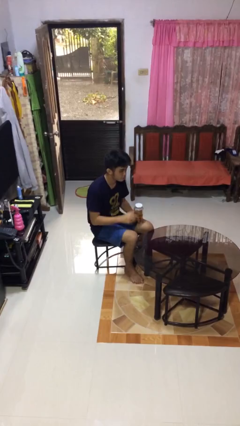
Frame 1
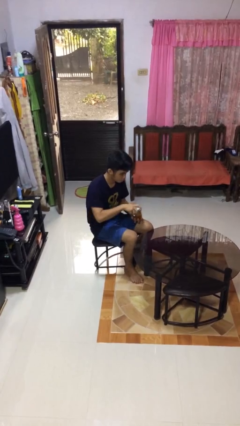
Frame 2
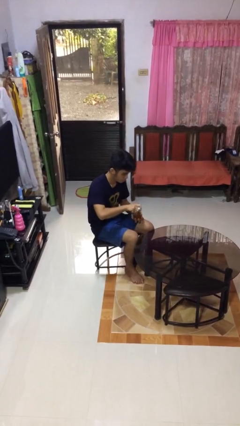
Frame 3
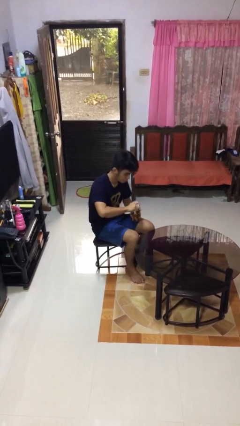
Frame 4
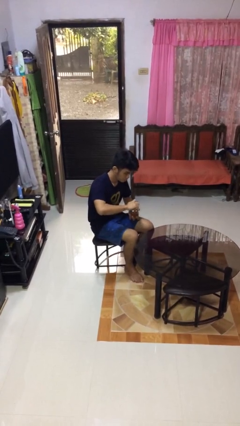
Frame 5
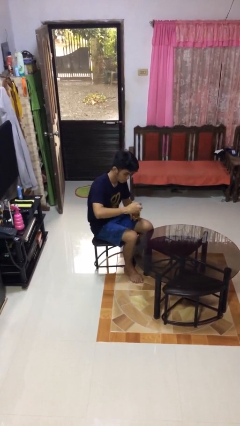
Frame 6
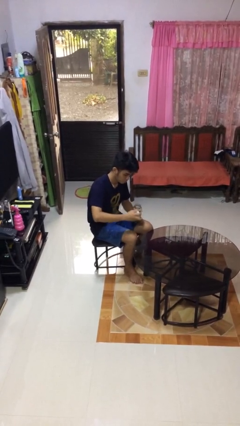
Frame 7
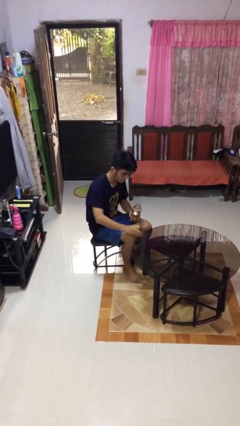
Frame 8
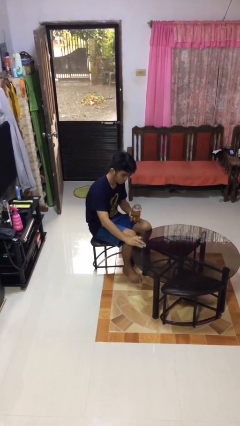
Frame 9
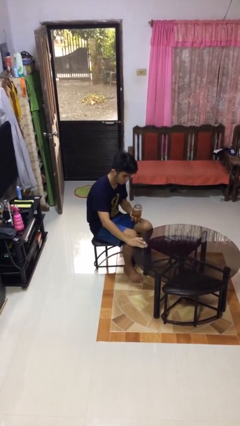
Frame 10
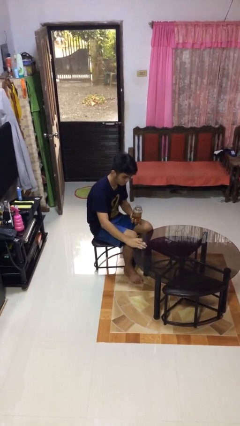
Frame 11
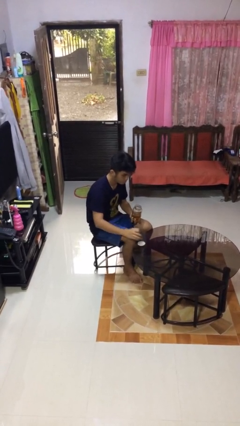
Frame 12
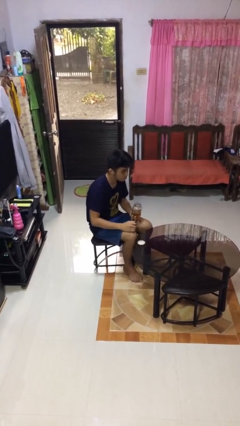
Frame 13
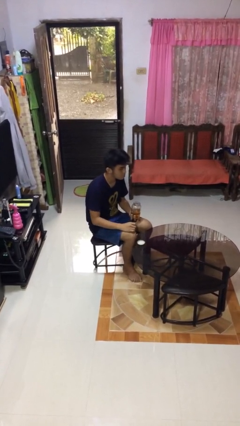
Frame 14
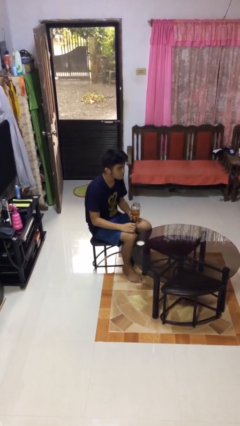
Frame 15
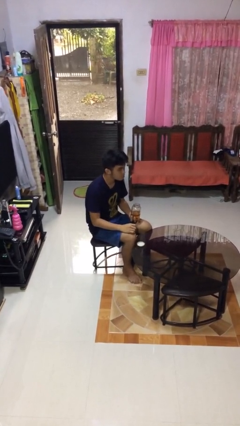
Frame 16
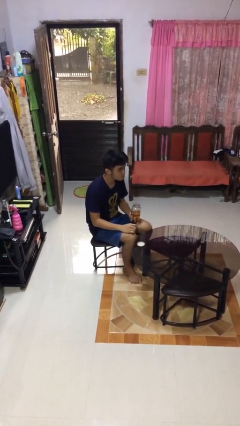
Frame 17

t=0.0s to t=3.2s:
person opens jar

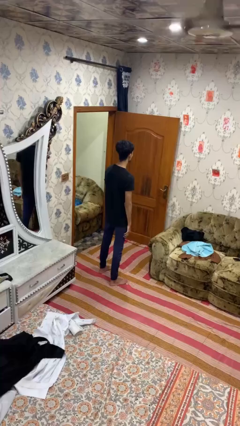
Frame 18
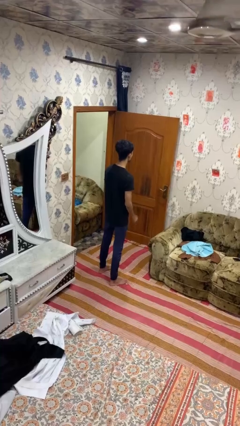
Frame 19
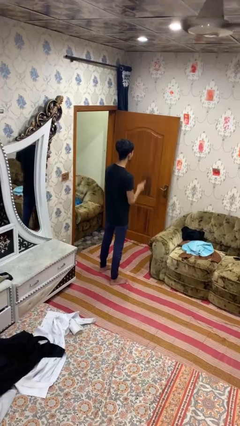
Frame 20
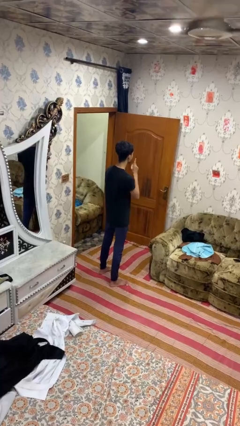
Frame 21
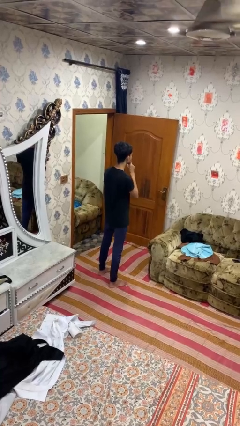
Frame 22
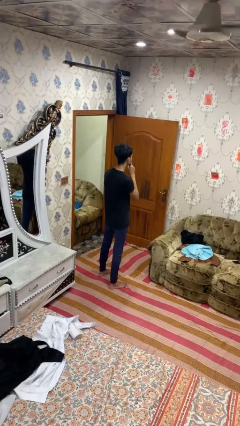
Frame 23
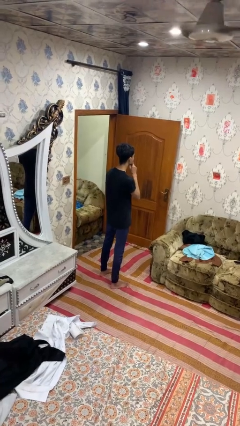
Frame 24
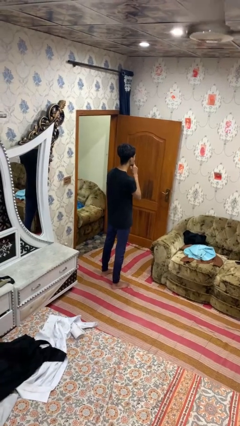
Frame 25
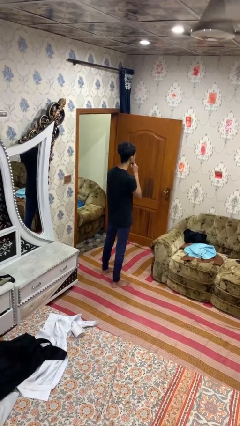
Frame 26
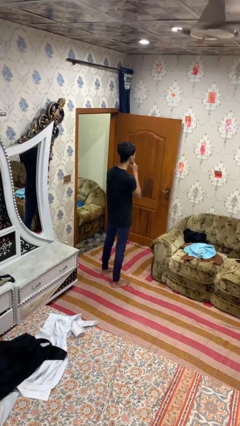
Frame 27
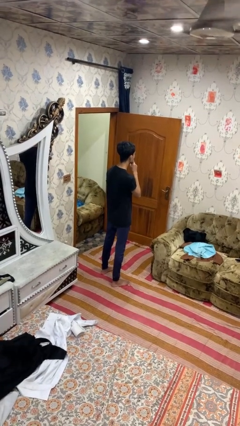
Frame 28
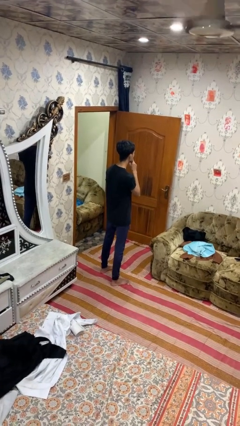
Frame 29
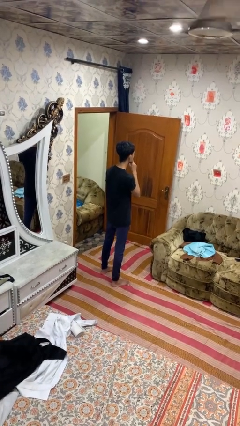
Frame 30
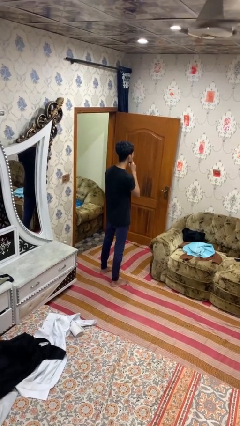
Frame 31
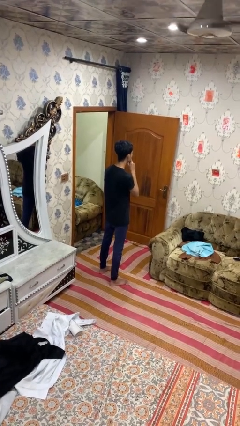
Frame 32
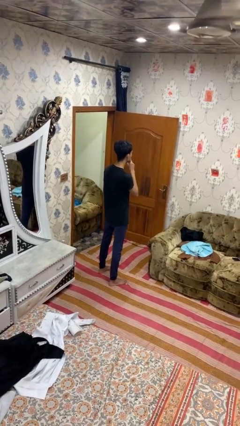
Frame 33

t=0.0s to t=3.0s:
person gestures be quiet

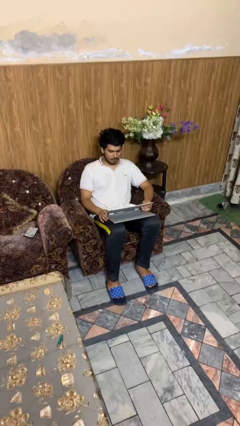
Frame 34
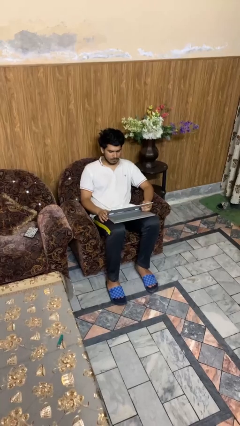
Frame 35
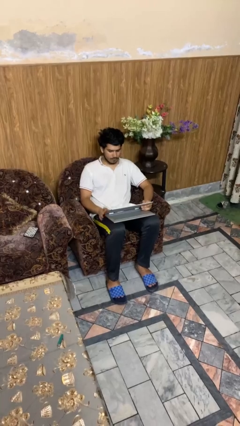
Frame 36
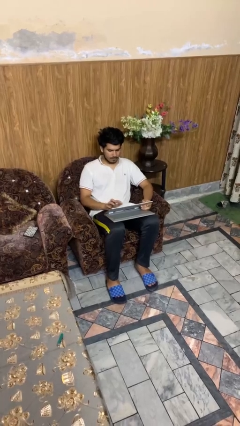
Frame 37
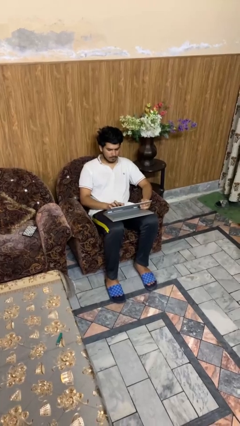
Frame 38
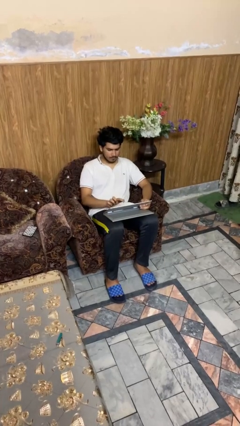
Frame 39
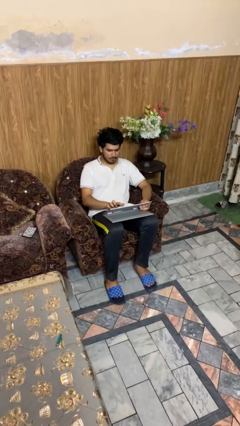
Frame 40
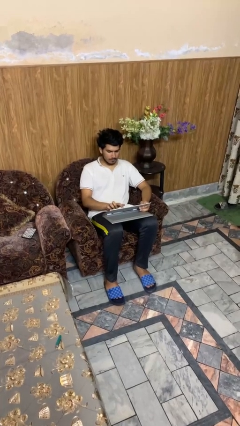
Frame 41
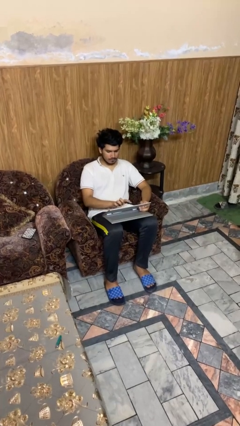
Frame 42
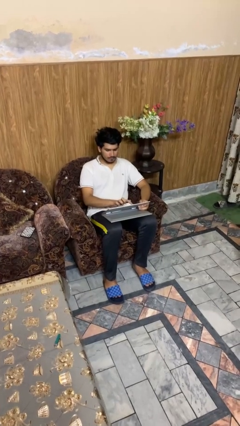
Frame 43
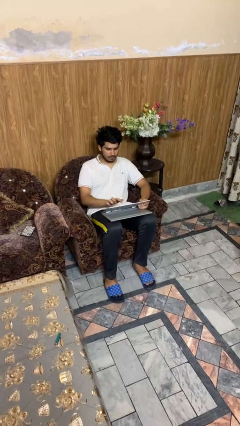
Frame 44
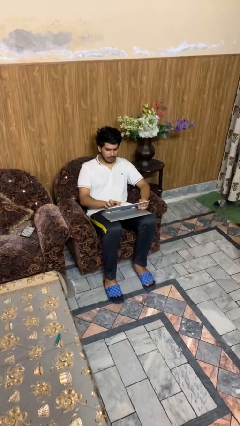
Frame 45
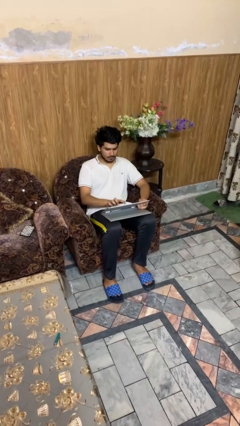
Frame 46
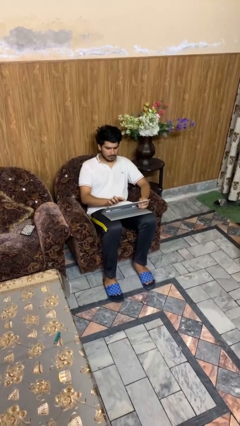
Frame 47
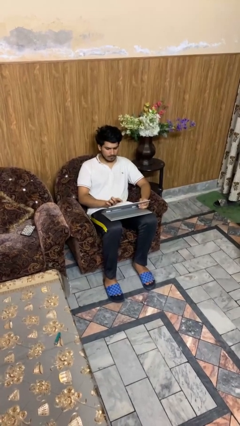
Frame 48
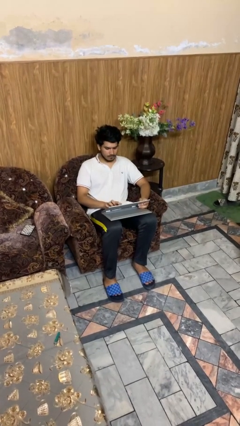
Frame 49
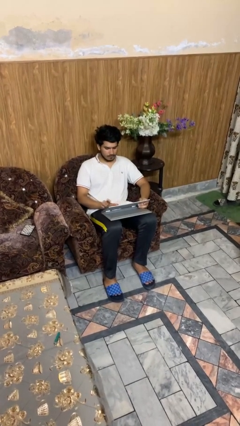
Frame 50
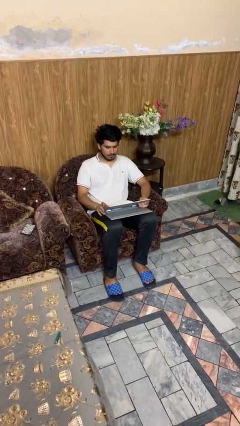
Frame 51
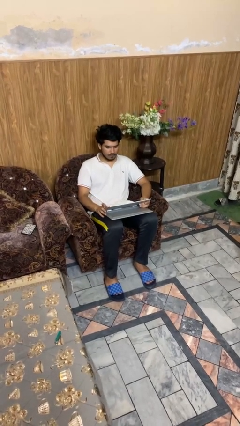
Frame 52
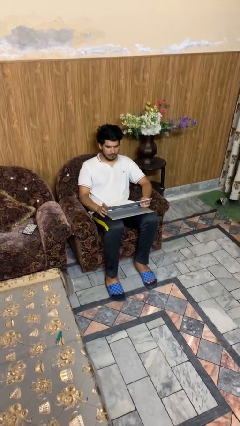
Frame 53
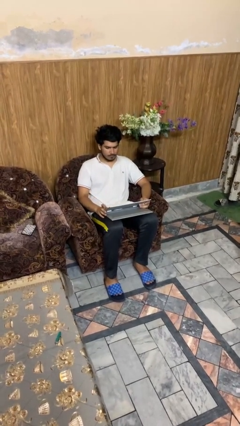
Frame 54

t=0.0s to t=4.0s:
person interacts with tablet

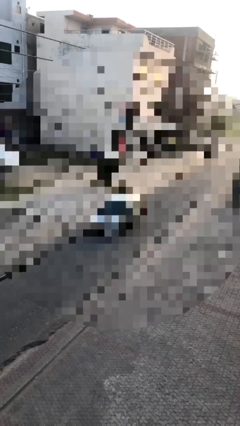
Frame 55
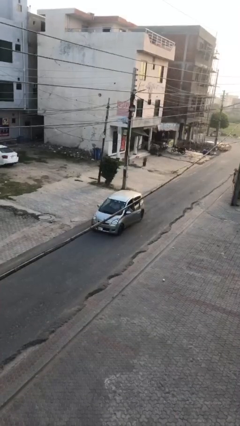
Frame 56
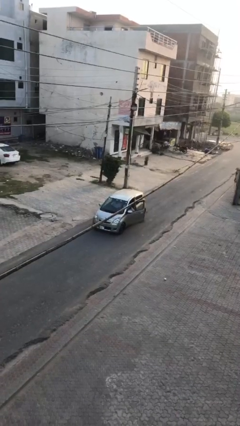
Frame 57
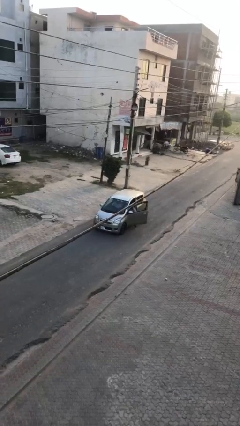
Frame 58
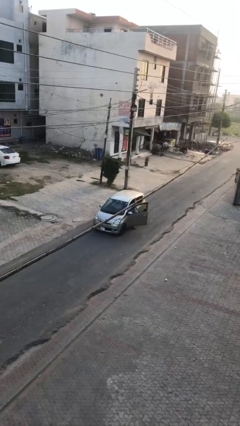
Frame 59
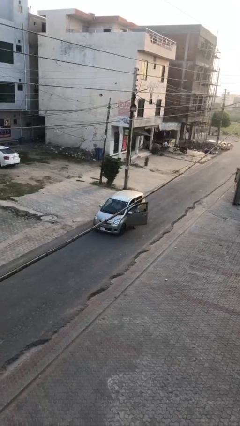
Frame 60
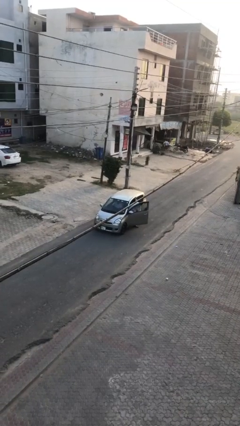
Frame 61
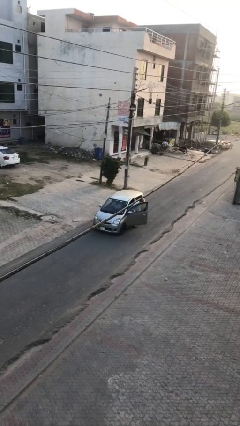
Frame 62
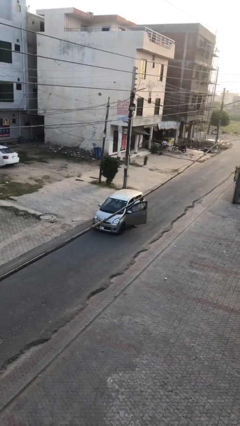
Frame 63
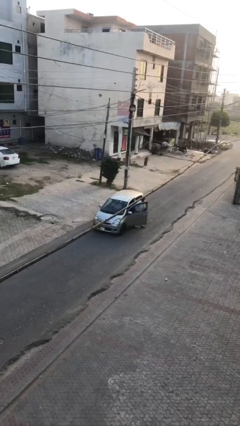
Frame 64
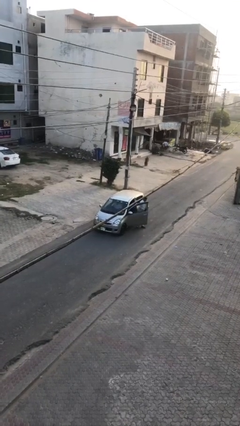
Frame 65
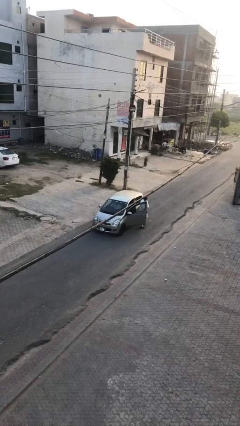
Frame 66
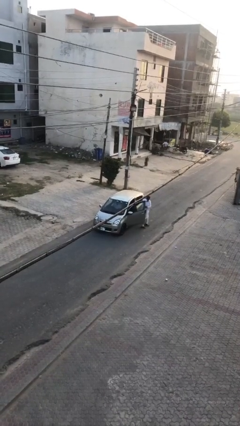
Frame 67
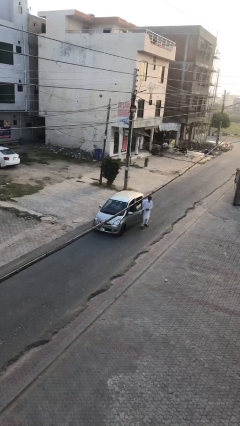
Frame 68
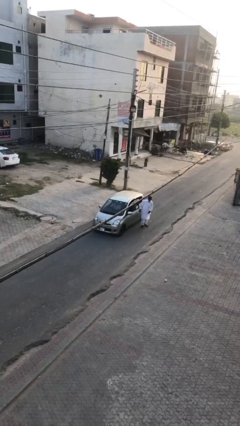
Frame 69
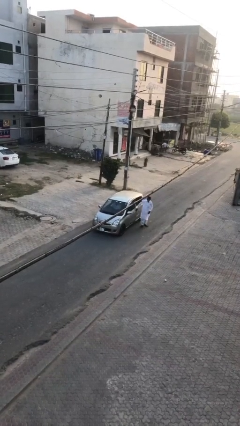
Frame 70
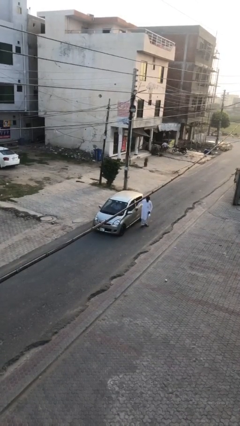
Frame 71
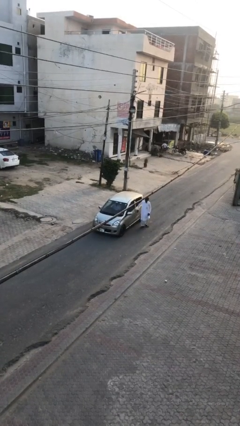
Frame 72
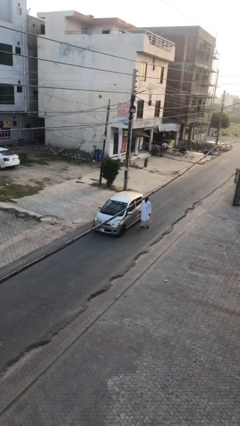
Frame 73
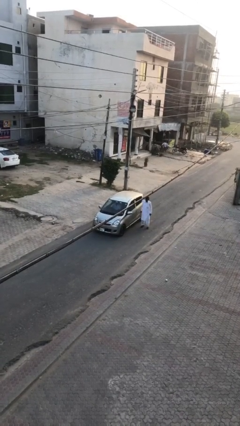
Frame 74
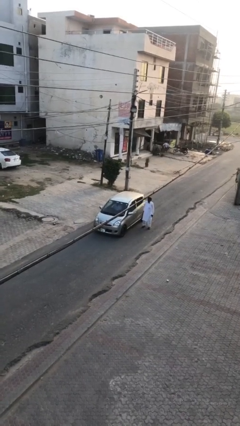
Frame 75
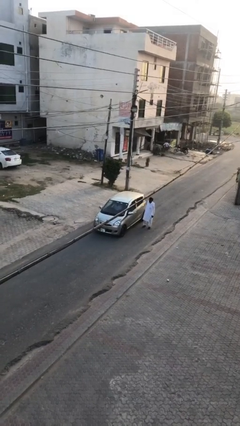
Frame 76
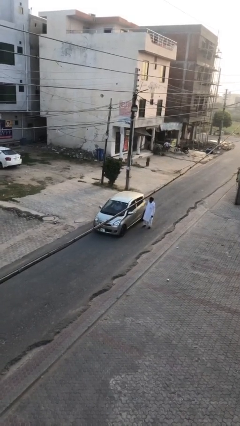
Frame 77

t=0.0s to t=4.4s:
car drops off person

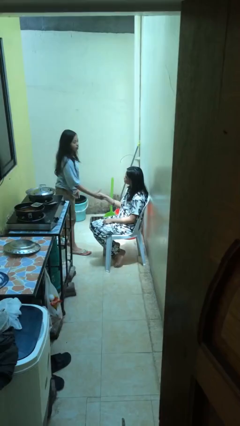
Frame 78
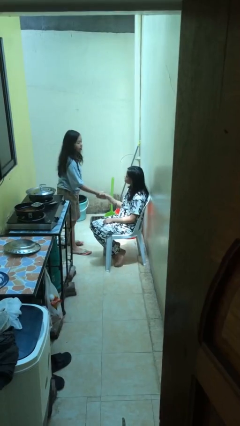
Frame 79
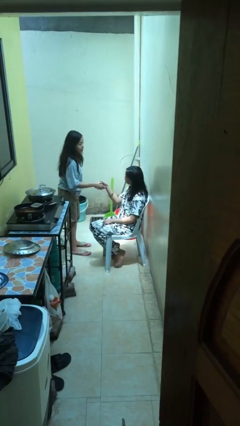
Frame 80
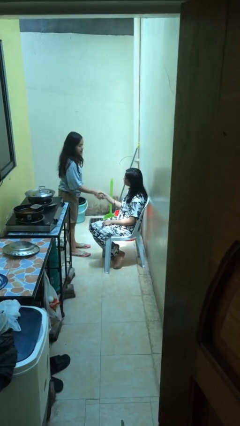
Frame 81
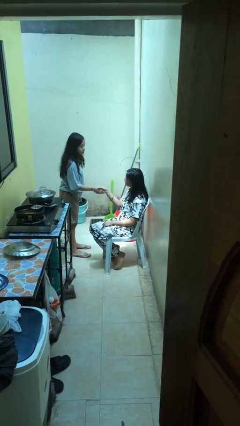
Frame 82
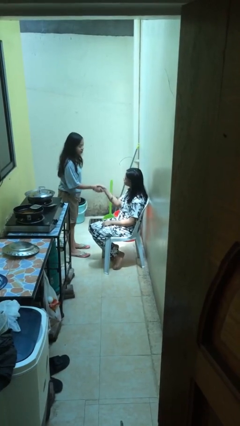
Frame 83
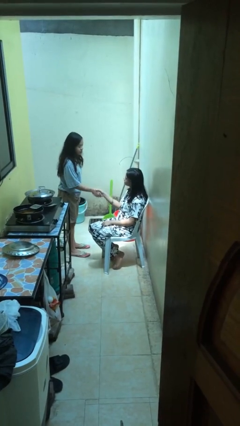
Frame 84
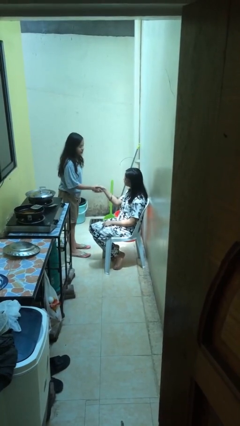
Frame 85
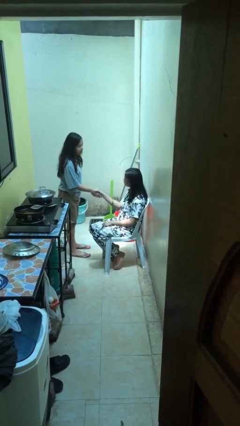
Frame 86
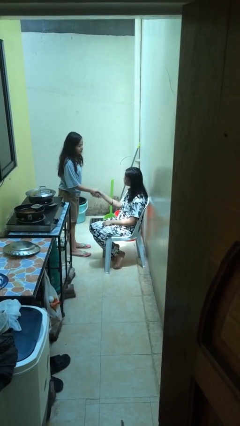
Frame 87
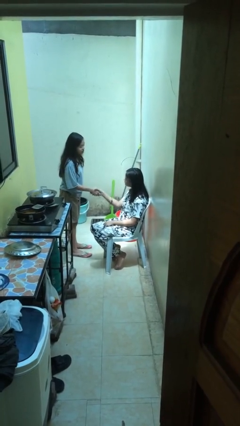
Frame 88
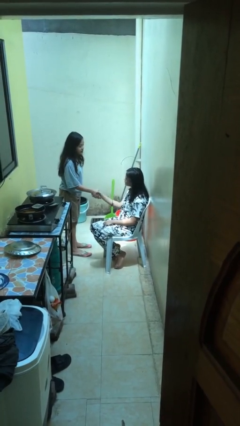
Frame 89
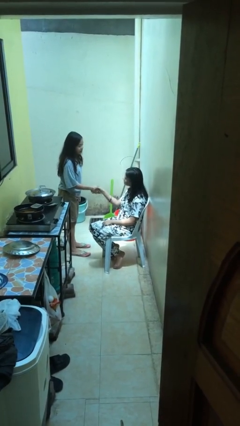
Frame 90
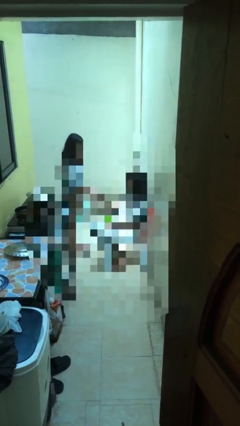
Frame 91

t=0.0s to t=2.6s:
person shakes hand
